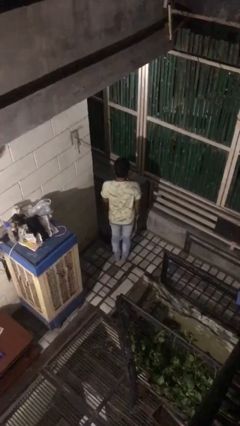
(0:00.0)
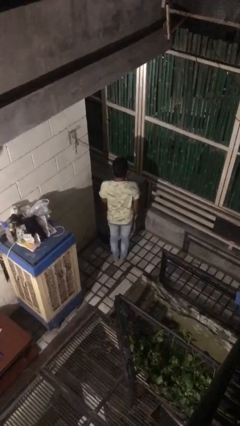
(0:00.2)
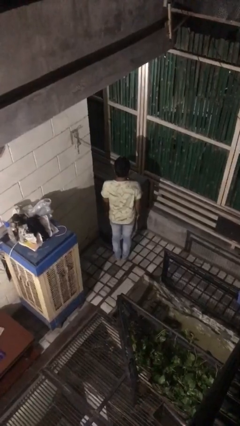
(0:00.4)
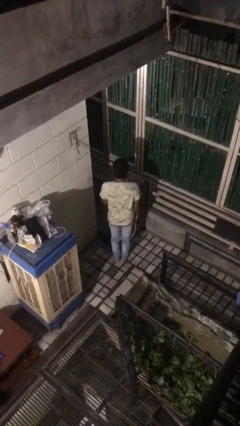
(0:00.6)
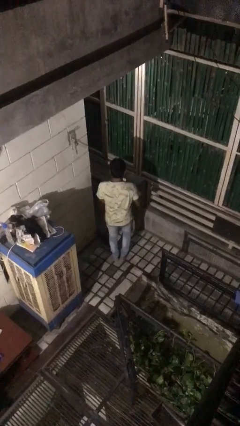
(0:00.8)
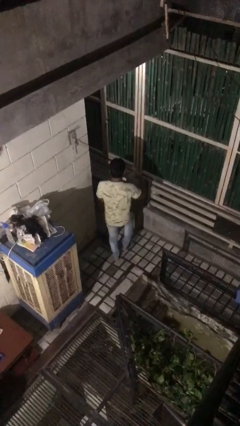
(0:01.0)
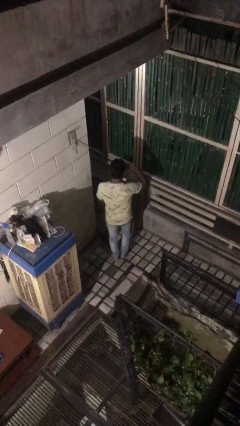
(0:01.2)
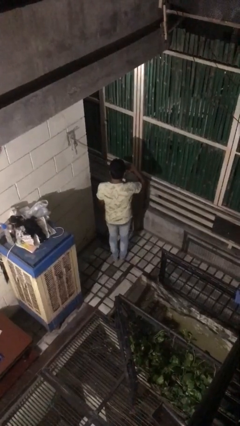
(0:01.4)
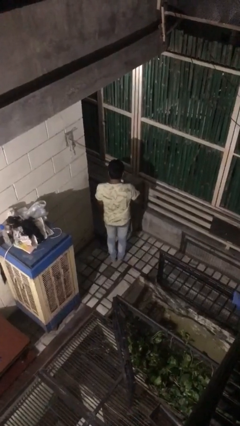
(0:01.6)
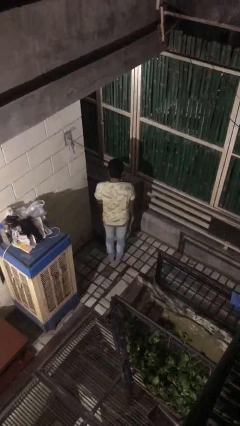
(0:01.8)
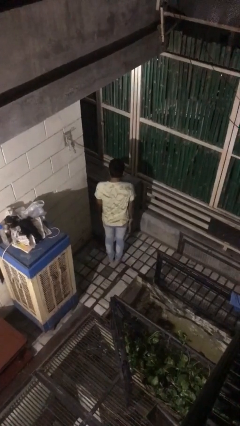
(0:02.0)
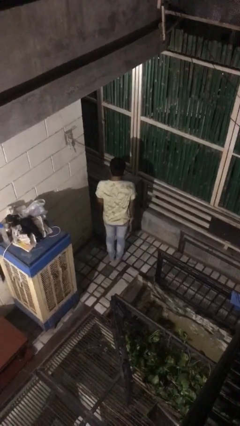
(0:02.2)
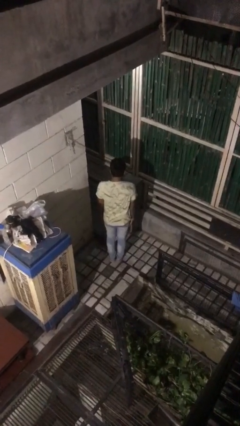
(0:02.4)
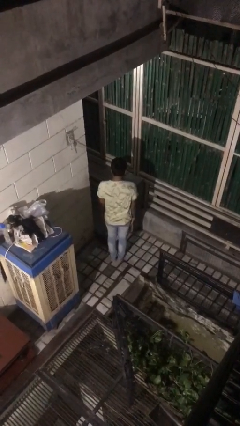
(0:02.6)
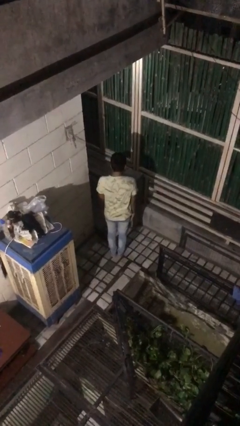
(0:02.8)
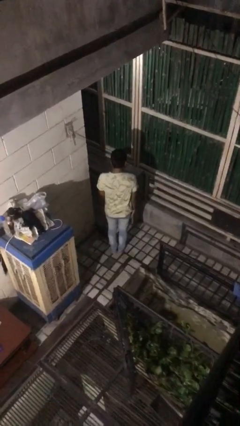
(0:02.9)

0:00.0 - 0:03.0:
person salutes

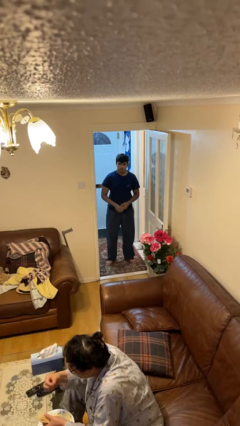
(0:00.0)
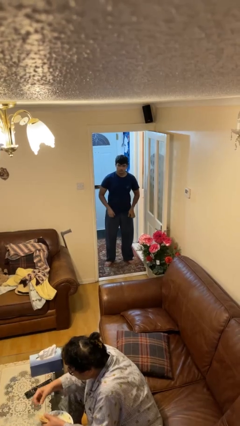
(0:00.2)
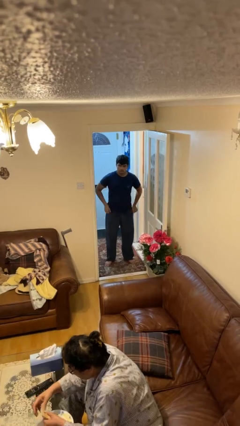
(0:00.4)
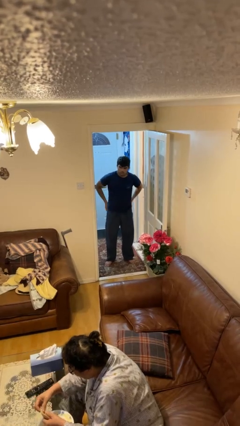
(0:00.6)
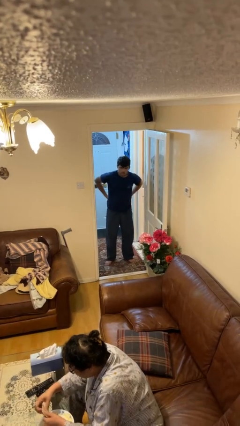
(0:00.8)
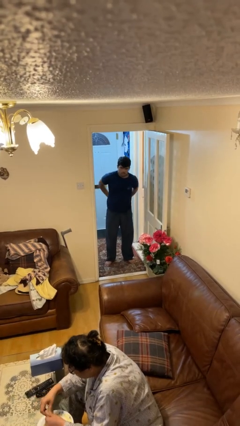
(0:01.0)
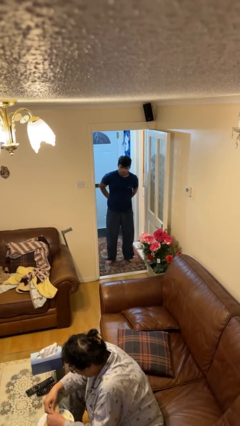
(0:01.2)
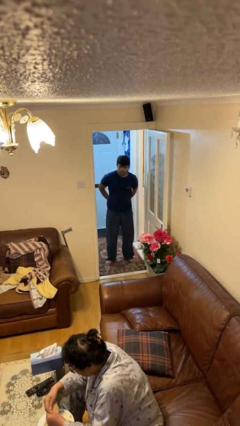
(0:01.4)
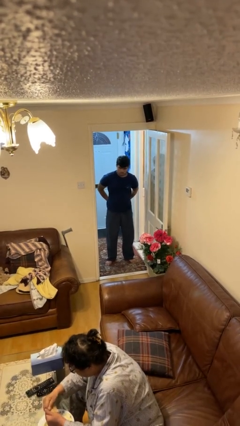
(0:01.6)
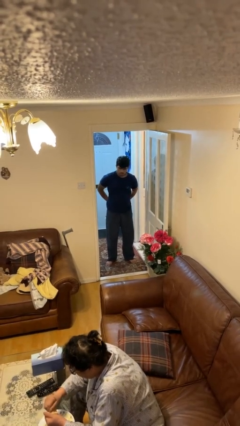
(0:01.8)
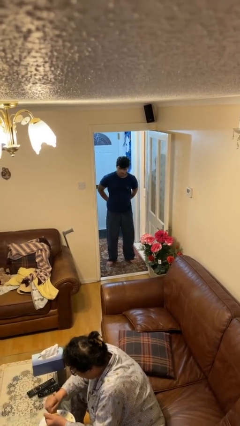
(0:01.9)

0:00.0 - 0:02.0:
person puts hands in back pockets

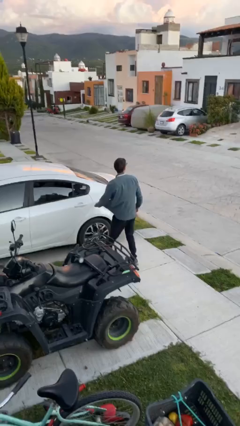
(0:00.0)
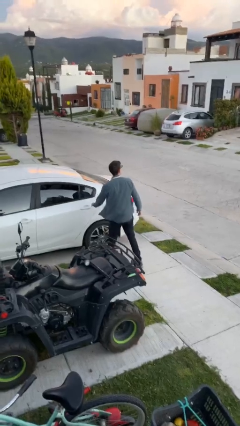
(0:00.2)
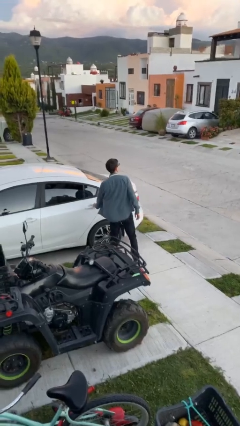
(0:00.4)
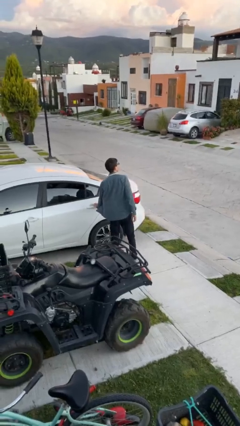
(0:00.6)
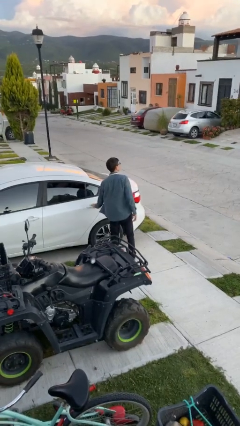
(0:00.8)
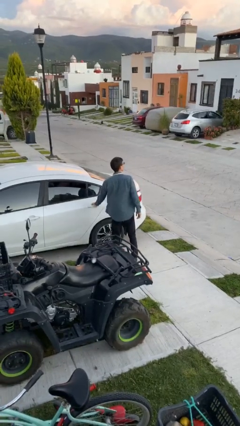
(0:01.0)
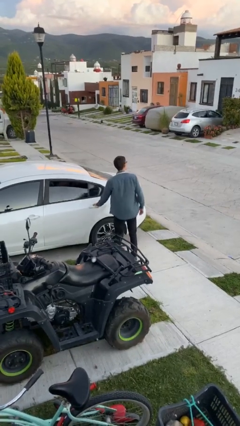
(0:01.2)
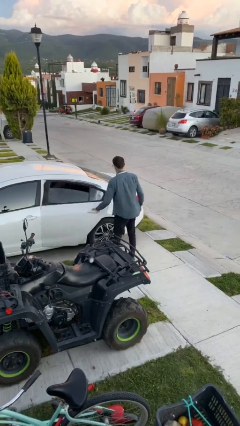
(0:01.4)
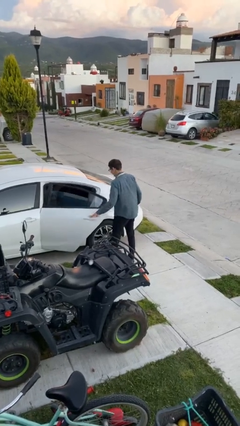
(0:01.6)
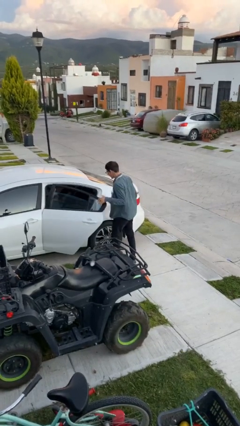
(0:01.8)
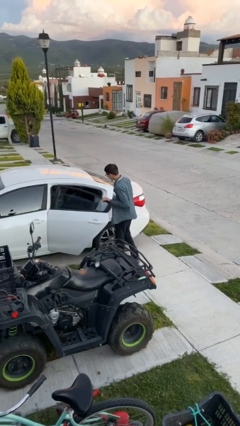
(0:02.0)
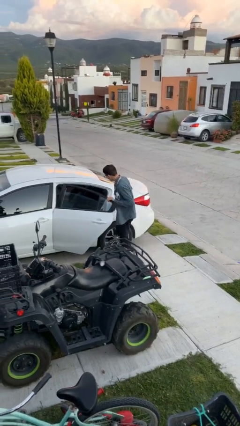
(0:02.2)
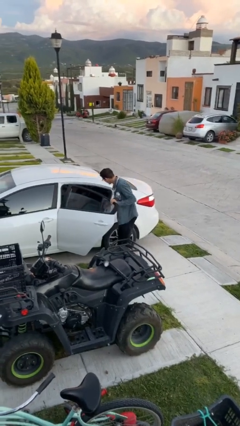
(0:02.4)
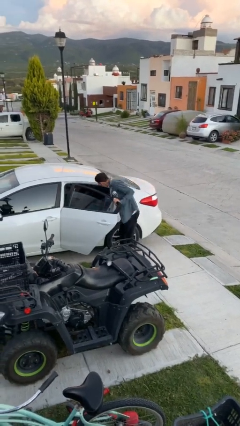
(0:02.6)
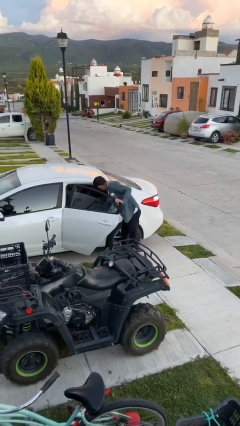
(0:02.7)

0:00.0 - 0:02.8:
person opens car door

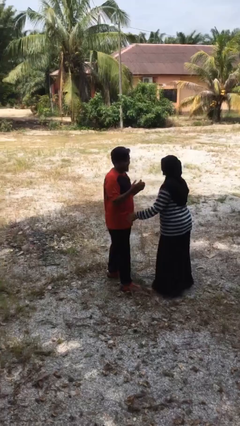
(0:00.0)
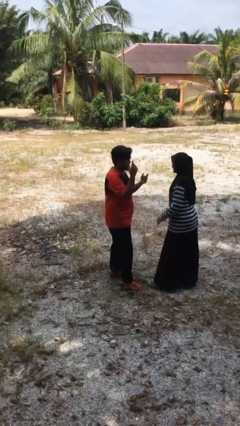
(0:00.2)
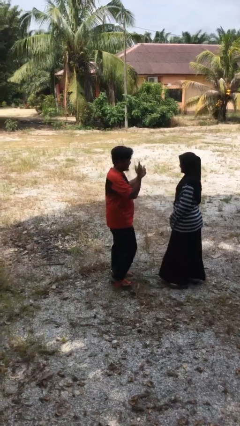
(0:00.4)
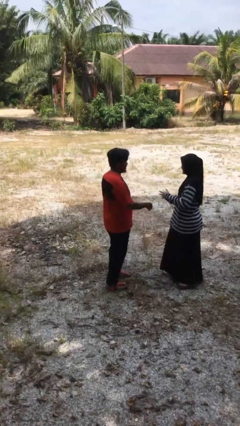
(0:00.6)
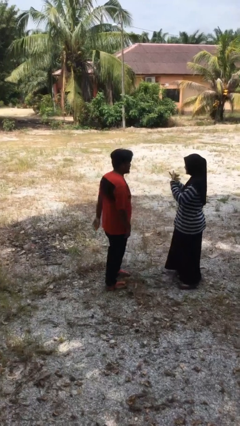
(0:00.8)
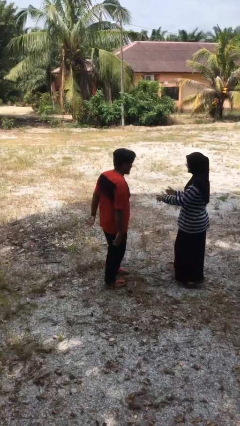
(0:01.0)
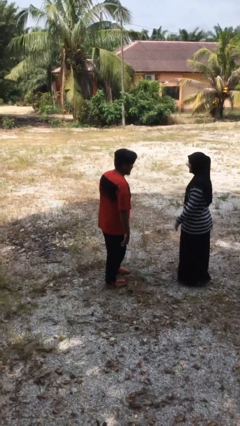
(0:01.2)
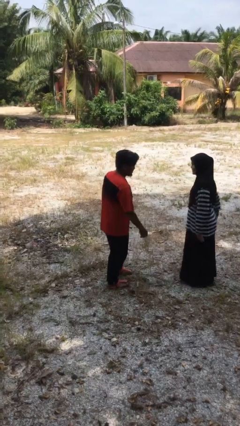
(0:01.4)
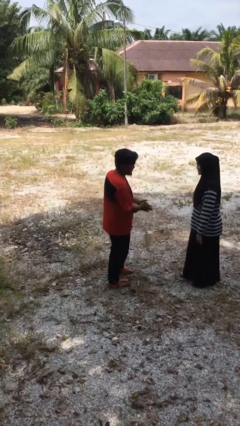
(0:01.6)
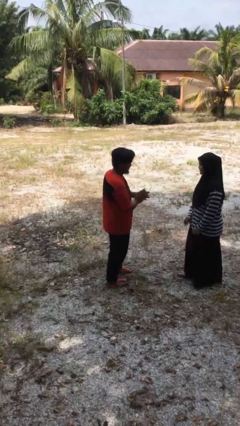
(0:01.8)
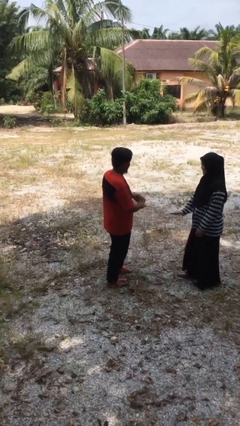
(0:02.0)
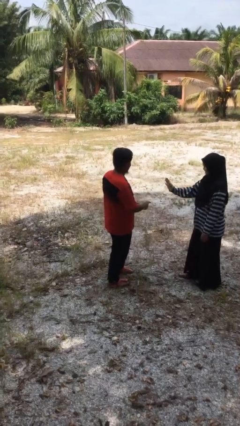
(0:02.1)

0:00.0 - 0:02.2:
person talks to person

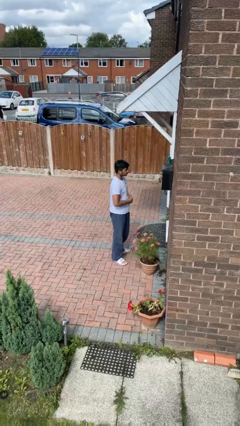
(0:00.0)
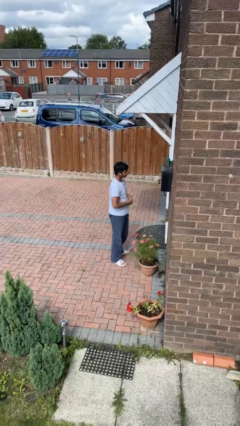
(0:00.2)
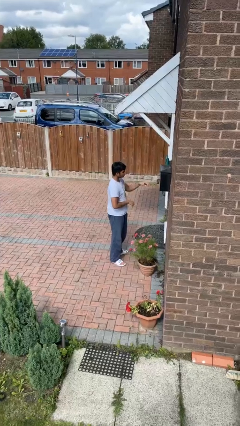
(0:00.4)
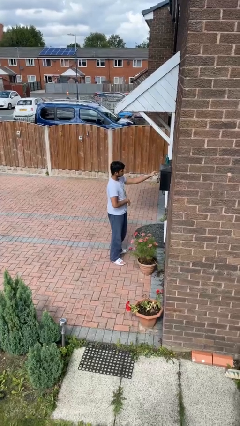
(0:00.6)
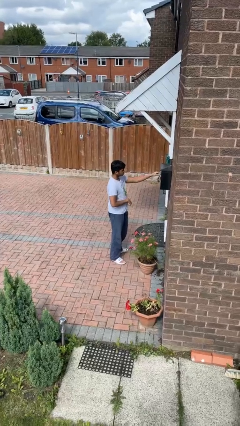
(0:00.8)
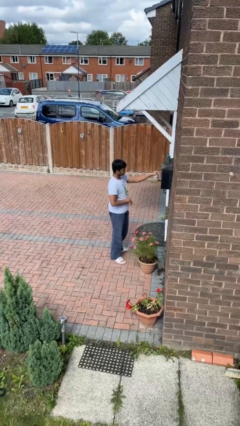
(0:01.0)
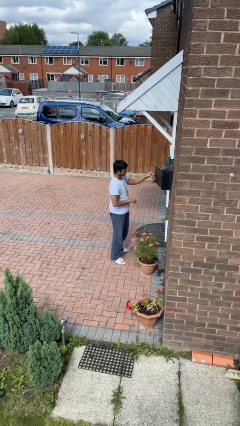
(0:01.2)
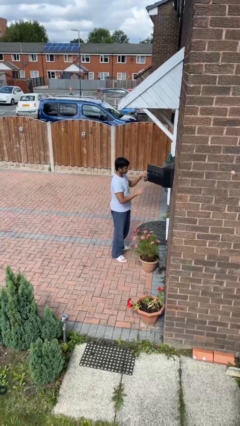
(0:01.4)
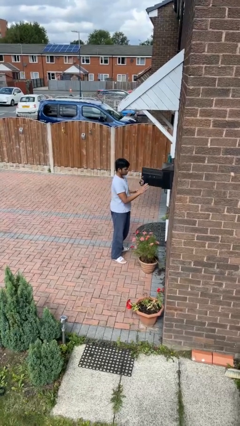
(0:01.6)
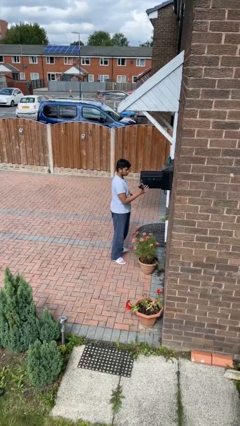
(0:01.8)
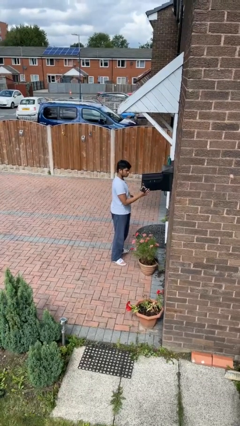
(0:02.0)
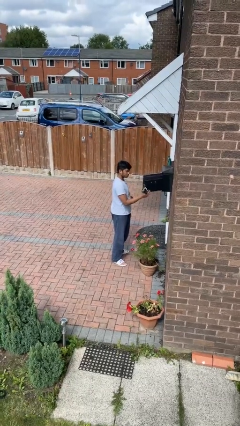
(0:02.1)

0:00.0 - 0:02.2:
person opens mailbox

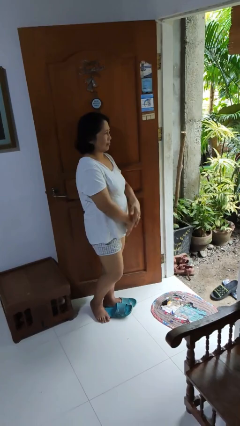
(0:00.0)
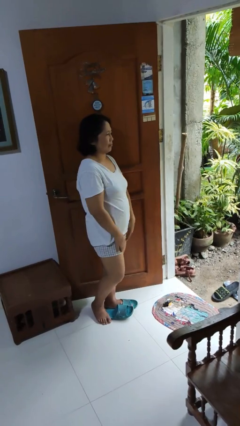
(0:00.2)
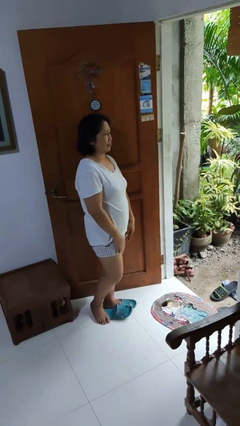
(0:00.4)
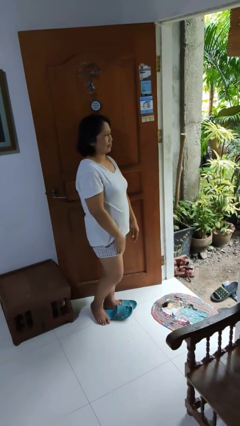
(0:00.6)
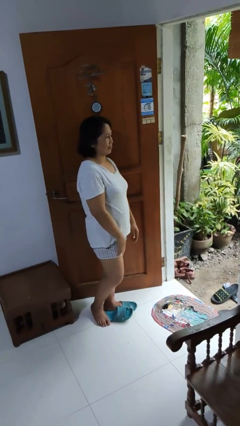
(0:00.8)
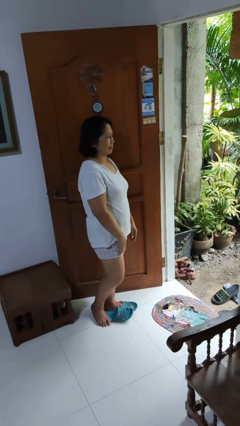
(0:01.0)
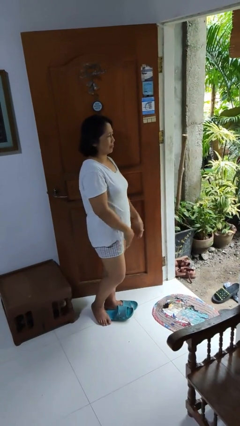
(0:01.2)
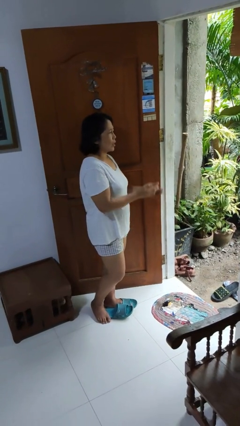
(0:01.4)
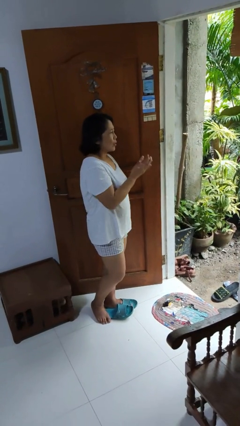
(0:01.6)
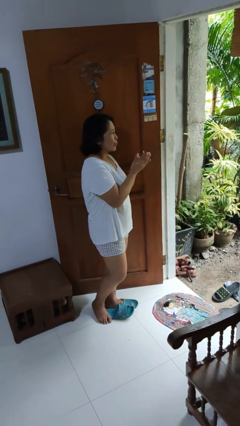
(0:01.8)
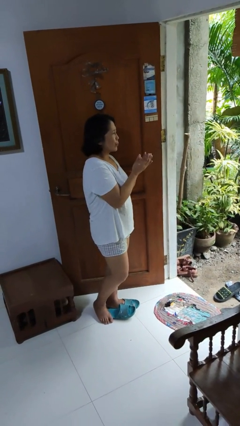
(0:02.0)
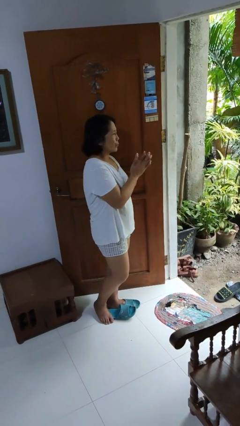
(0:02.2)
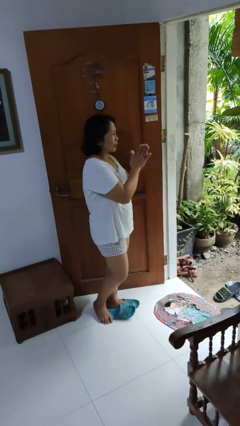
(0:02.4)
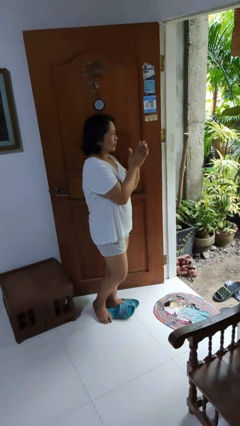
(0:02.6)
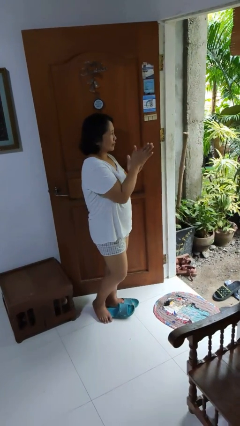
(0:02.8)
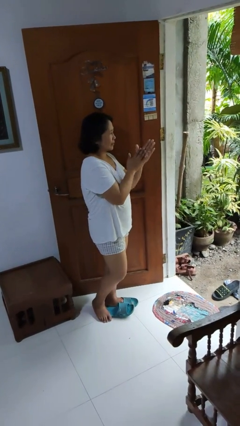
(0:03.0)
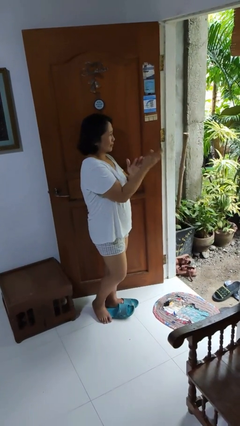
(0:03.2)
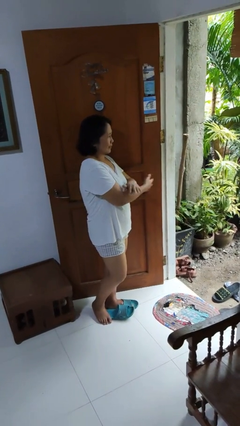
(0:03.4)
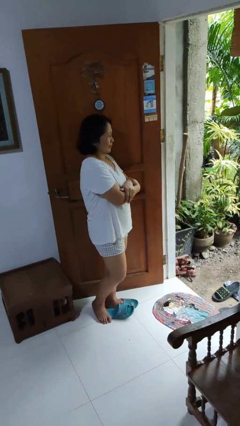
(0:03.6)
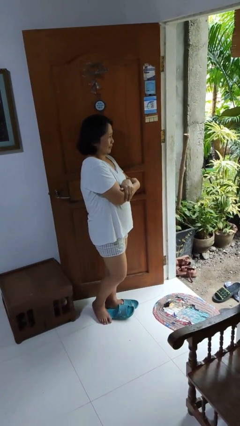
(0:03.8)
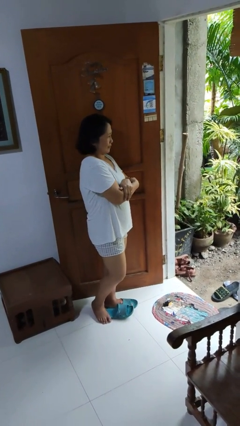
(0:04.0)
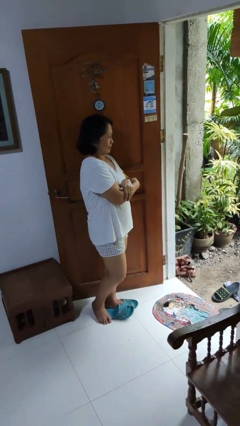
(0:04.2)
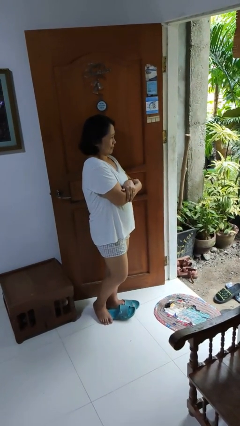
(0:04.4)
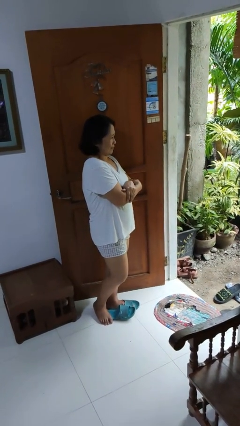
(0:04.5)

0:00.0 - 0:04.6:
person blows into hands

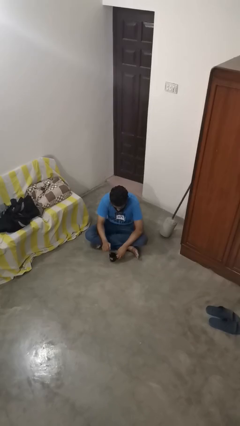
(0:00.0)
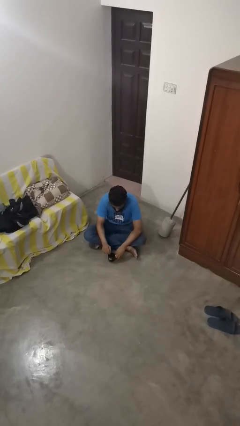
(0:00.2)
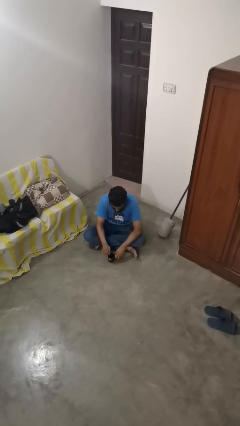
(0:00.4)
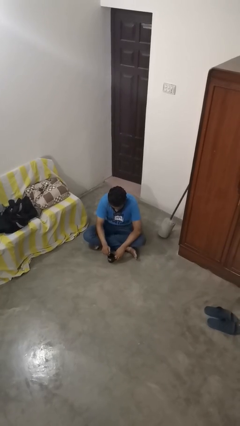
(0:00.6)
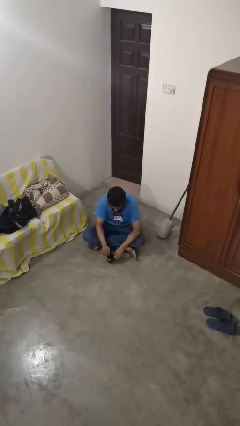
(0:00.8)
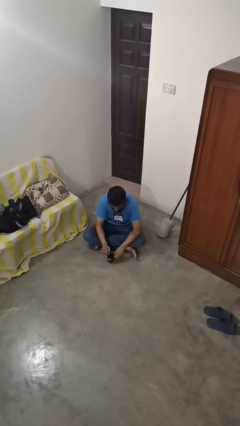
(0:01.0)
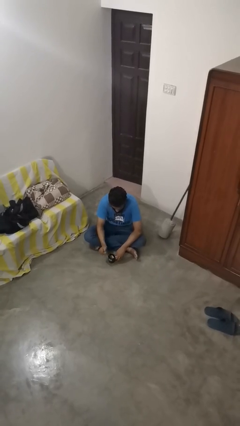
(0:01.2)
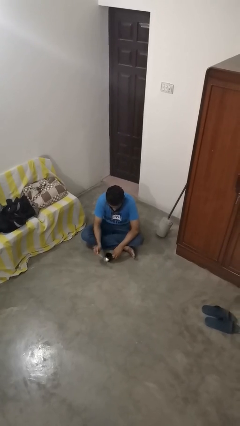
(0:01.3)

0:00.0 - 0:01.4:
person stirs mug
